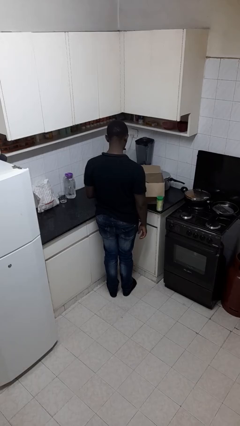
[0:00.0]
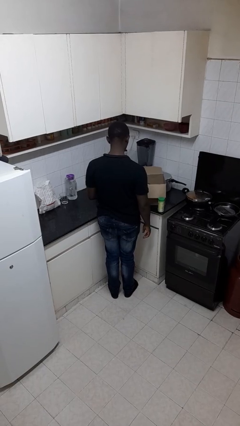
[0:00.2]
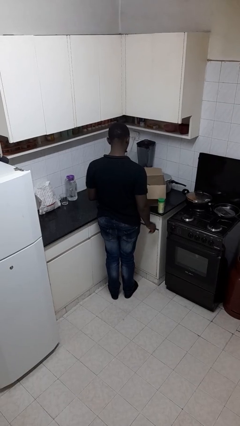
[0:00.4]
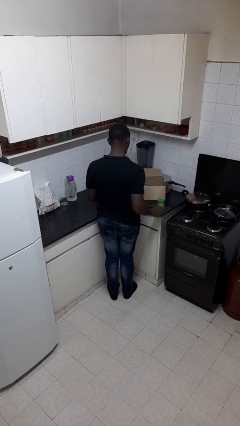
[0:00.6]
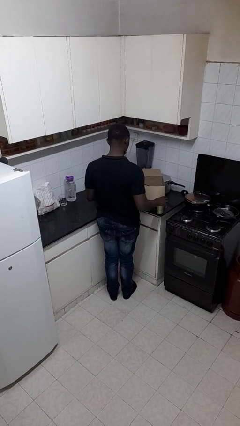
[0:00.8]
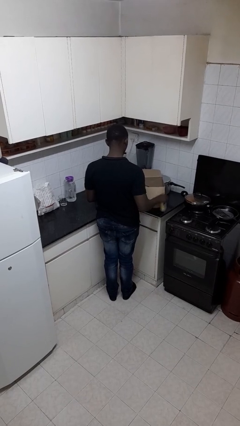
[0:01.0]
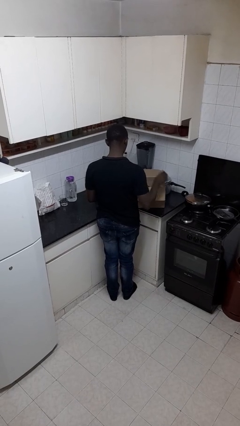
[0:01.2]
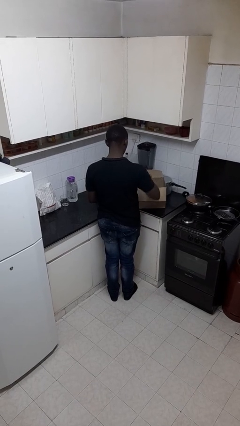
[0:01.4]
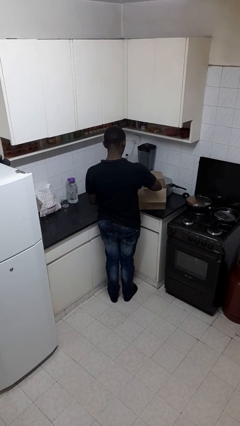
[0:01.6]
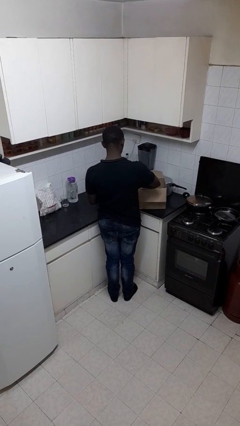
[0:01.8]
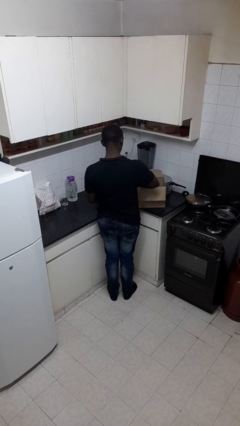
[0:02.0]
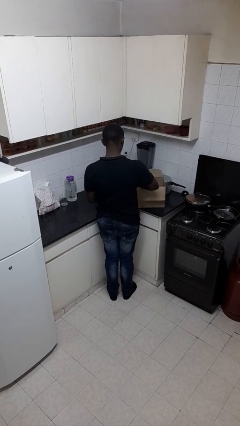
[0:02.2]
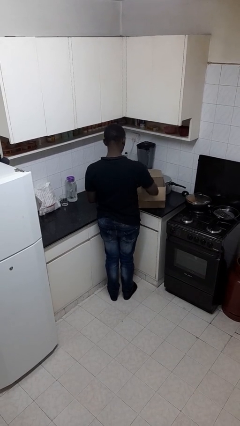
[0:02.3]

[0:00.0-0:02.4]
person puts object into box

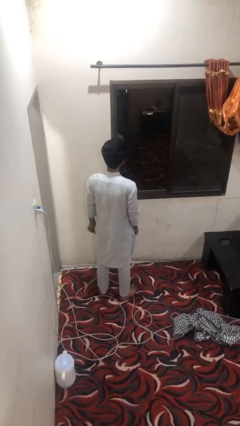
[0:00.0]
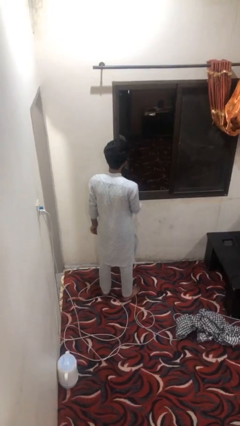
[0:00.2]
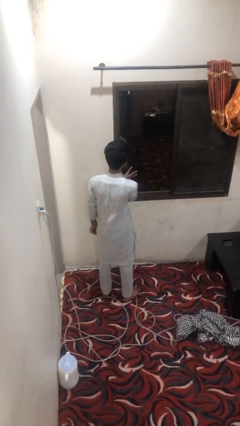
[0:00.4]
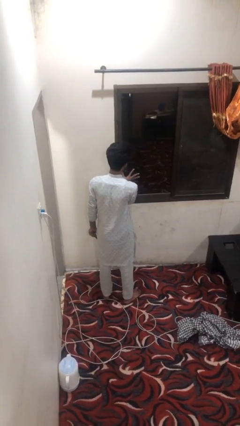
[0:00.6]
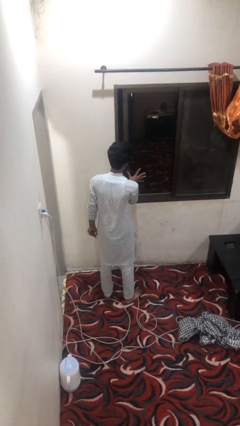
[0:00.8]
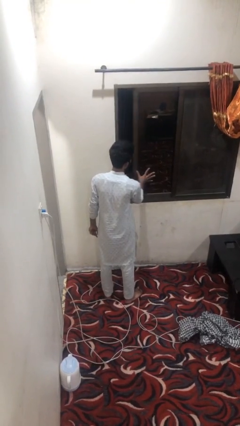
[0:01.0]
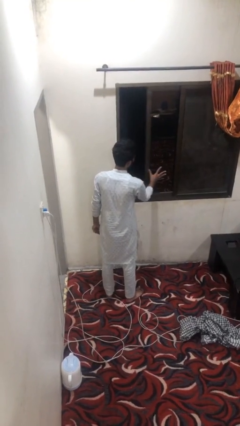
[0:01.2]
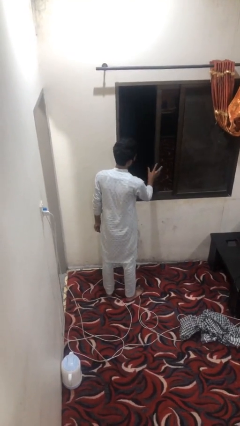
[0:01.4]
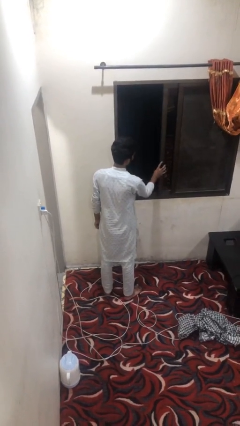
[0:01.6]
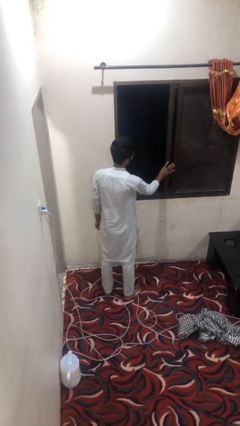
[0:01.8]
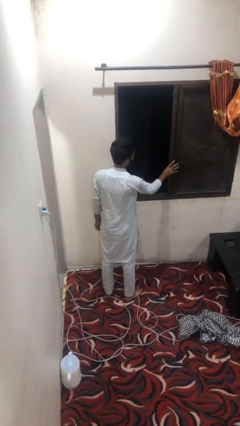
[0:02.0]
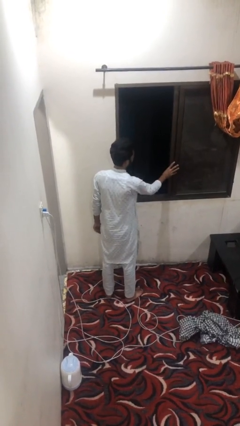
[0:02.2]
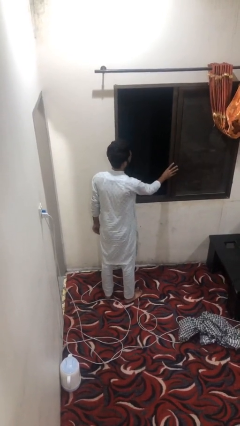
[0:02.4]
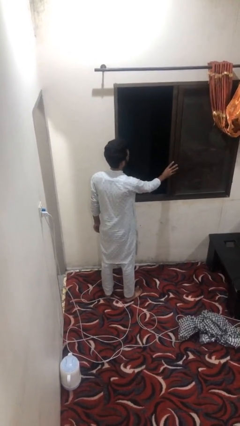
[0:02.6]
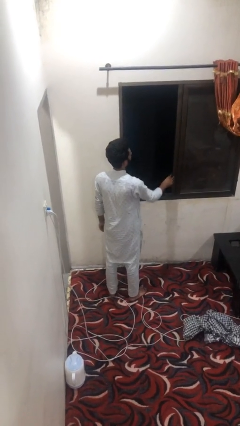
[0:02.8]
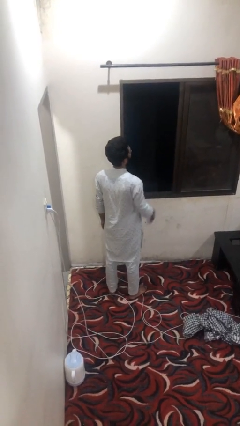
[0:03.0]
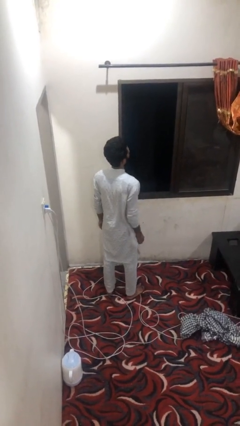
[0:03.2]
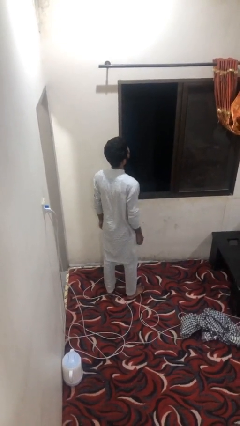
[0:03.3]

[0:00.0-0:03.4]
person opens home window

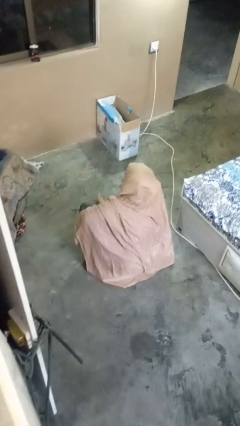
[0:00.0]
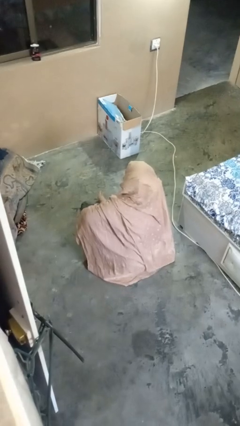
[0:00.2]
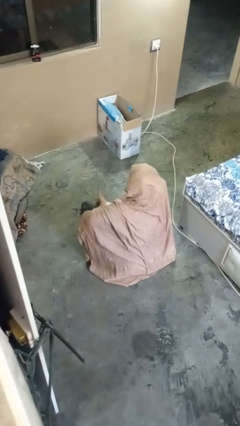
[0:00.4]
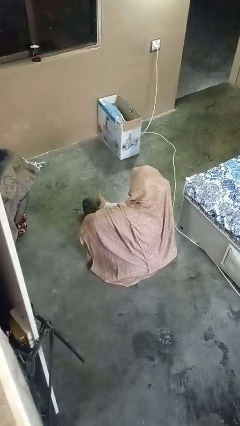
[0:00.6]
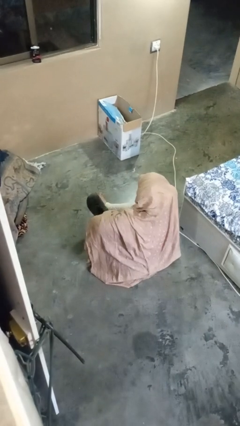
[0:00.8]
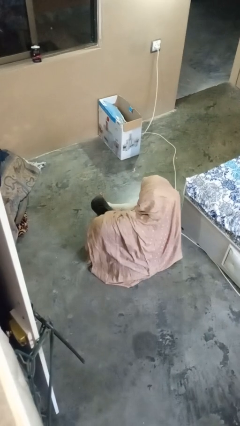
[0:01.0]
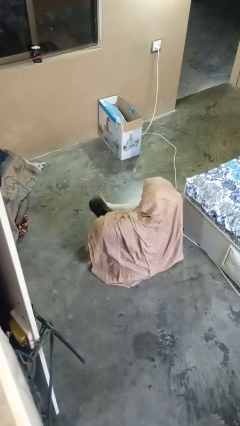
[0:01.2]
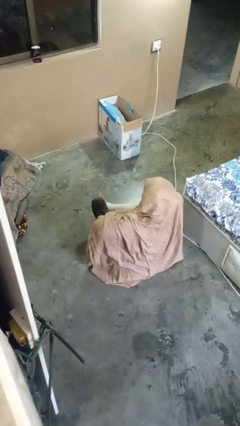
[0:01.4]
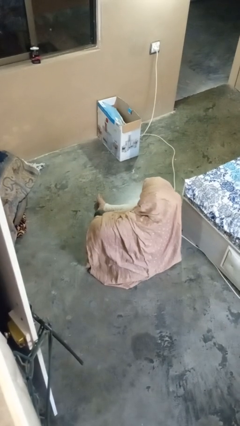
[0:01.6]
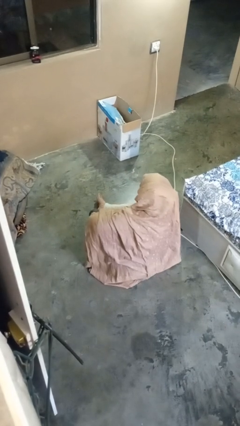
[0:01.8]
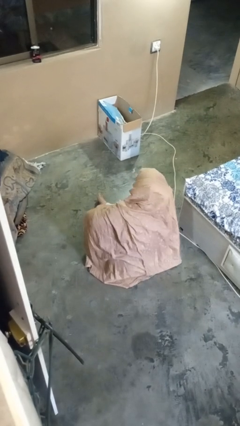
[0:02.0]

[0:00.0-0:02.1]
person puts on shoes

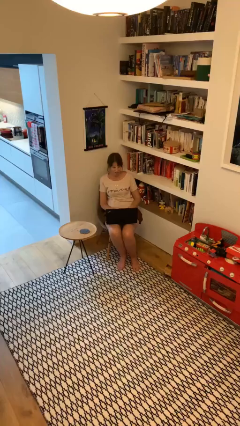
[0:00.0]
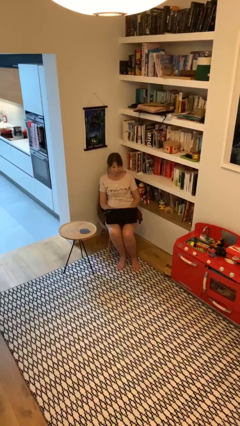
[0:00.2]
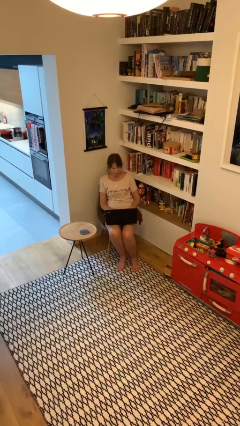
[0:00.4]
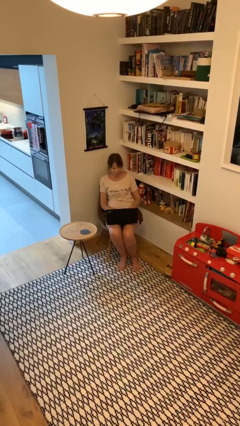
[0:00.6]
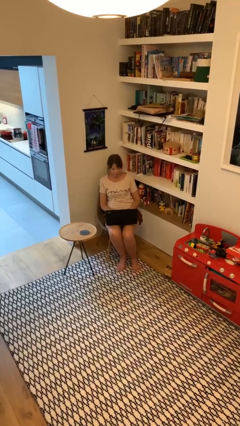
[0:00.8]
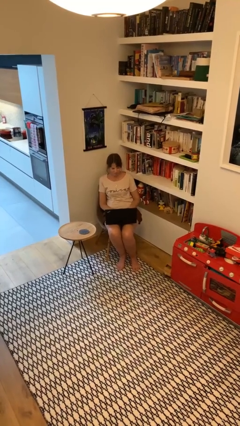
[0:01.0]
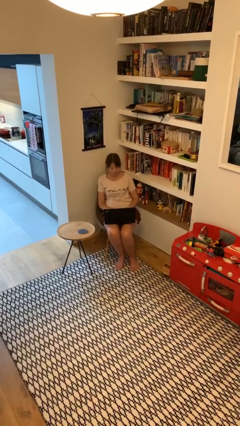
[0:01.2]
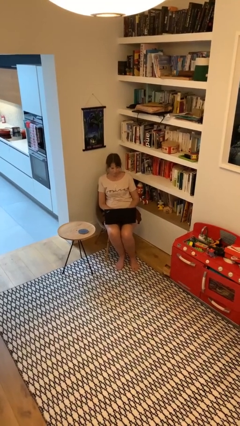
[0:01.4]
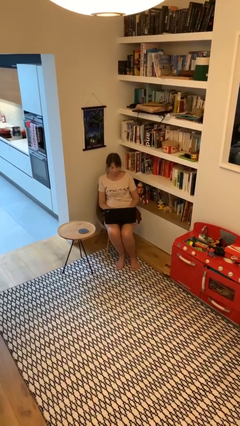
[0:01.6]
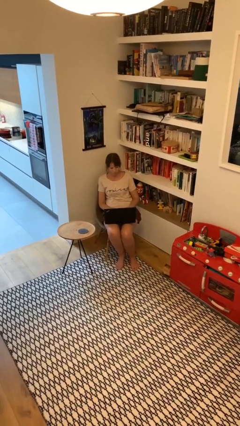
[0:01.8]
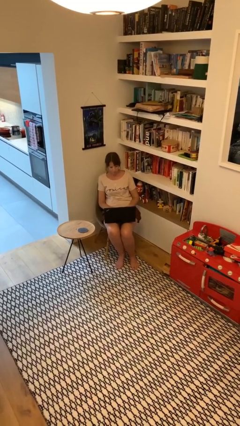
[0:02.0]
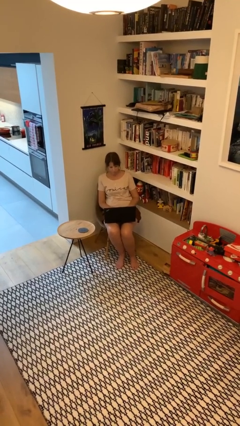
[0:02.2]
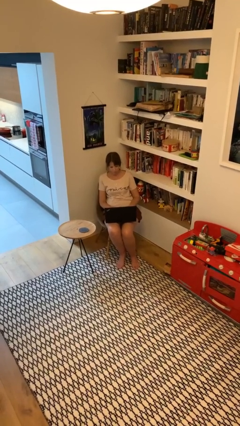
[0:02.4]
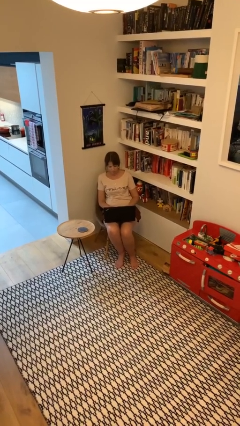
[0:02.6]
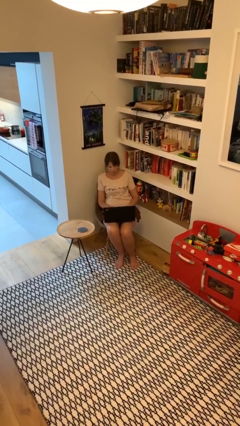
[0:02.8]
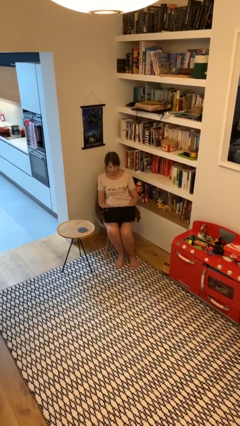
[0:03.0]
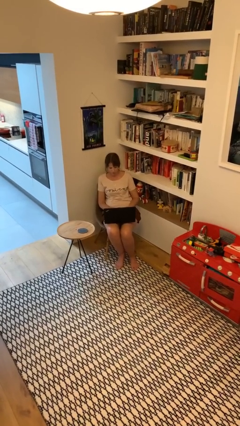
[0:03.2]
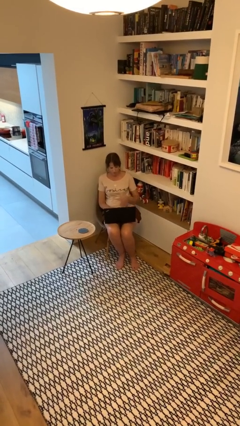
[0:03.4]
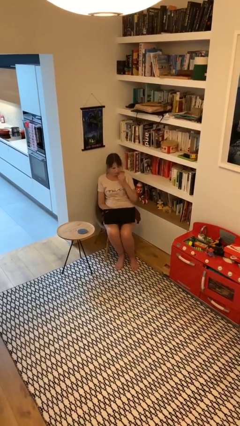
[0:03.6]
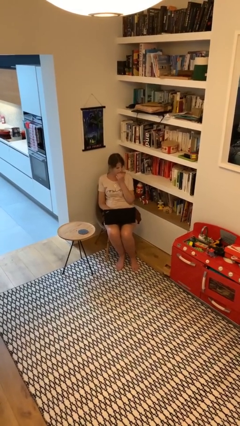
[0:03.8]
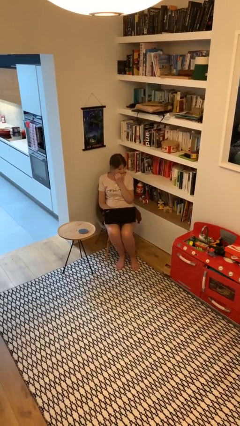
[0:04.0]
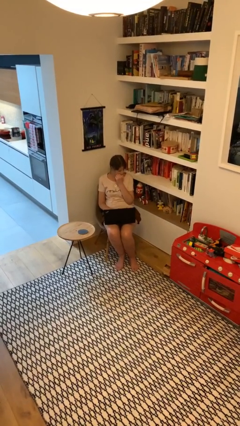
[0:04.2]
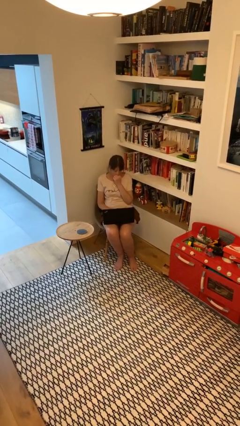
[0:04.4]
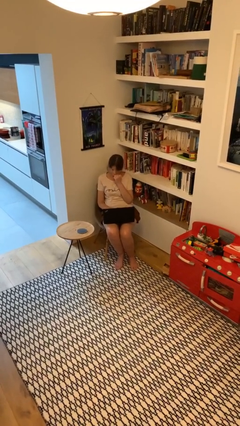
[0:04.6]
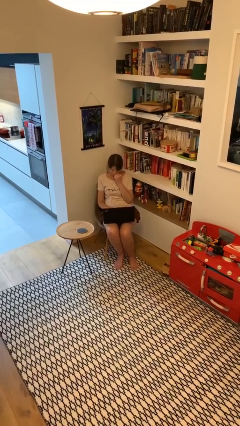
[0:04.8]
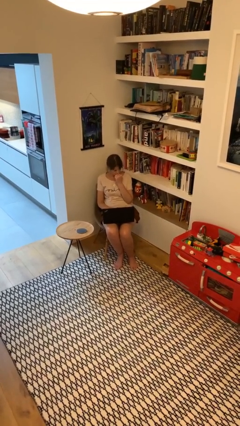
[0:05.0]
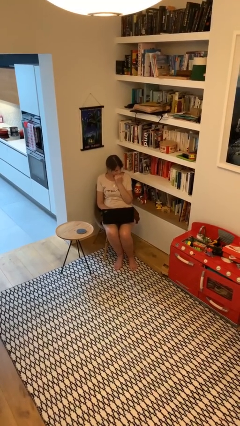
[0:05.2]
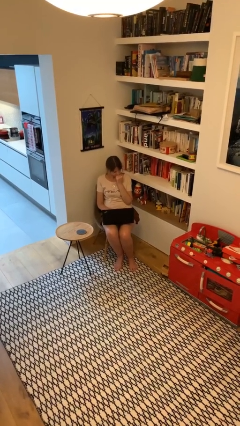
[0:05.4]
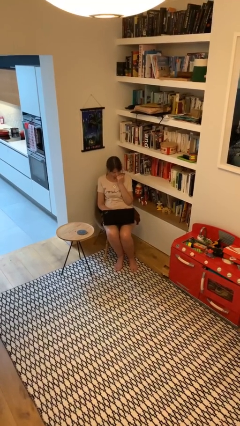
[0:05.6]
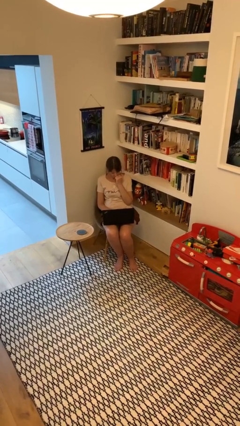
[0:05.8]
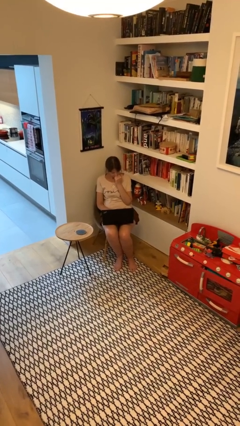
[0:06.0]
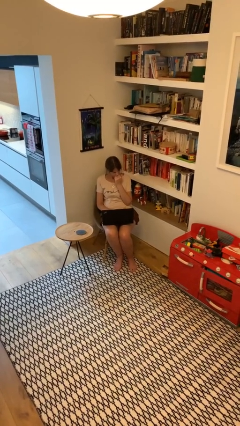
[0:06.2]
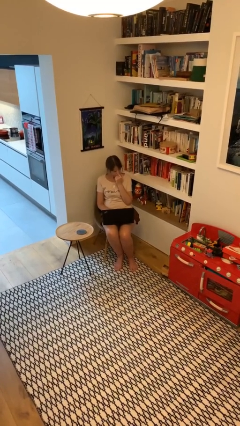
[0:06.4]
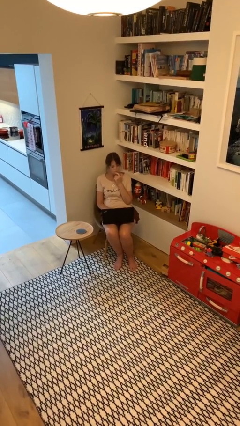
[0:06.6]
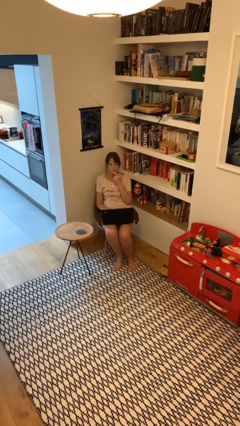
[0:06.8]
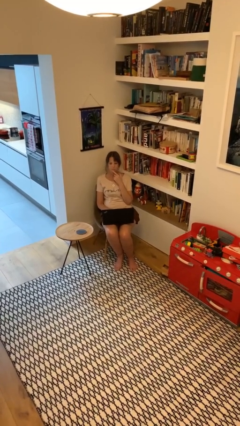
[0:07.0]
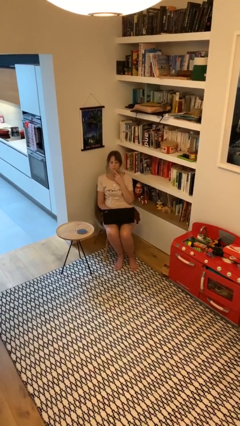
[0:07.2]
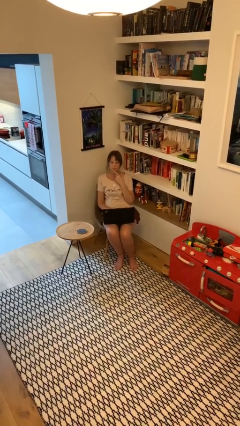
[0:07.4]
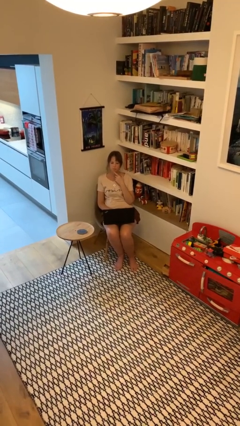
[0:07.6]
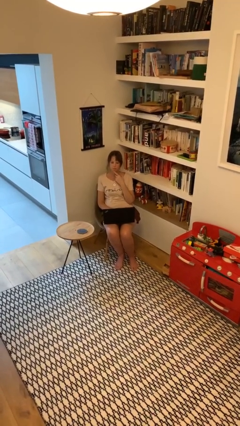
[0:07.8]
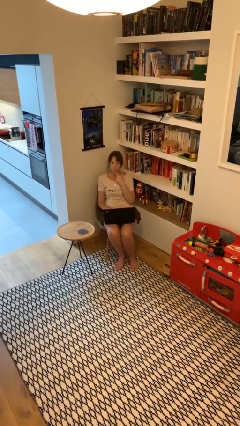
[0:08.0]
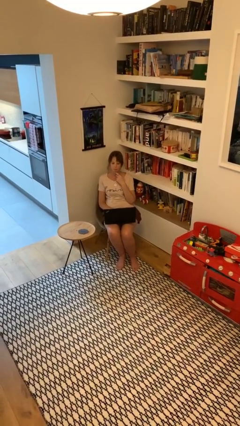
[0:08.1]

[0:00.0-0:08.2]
person interacts with laptop

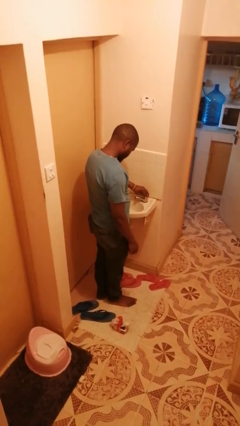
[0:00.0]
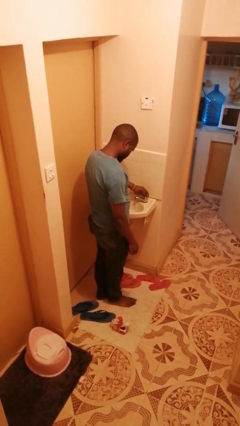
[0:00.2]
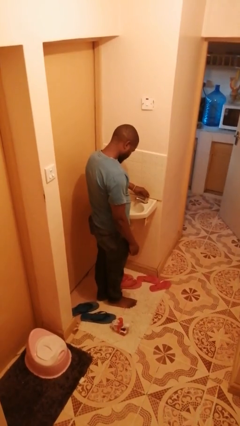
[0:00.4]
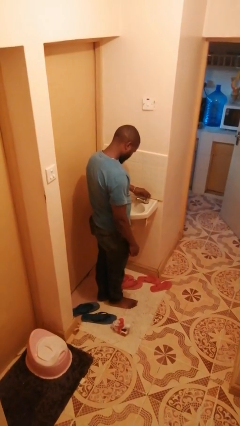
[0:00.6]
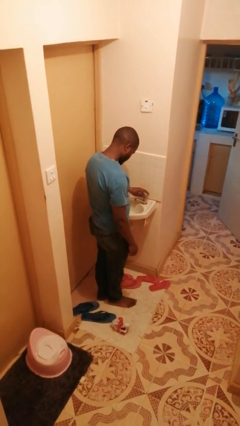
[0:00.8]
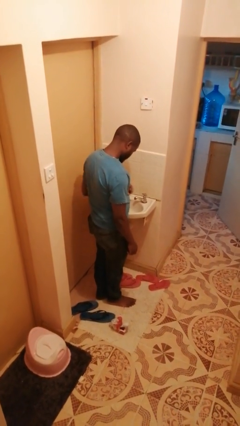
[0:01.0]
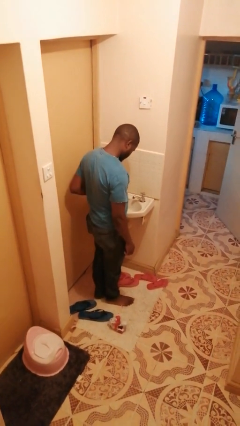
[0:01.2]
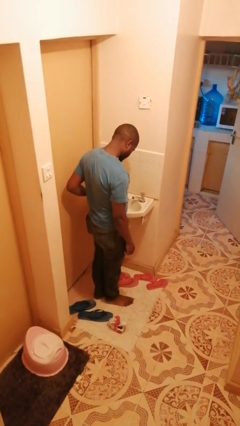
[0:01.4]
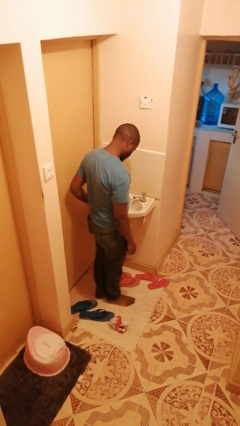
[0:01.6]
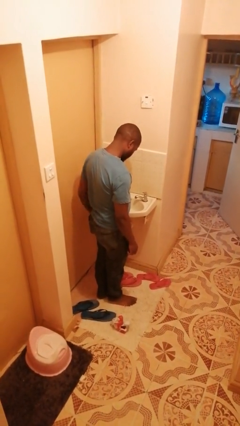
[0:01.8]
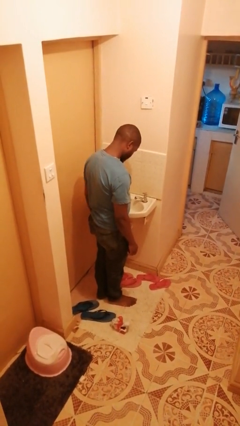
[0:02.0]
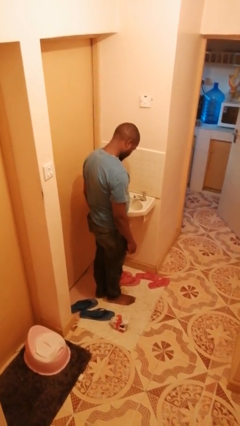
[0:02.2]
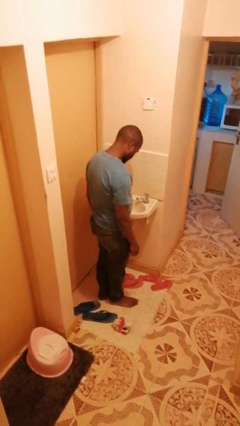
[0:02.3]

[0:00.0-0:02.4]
person turns off faucet
